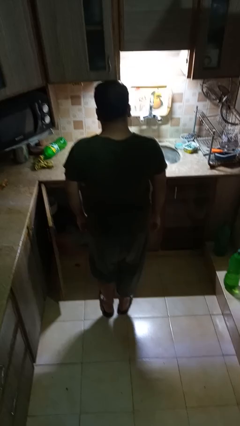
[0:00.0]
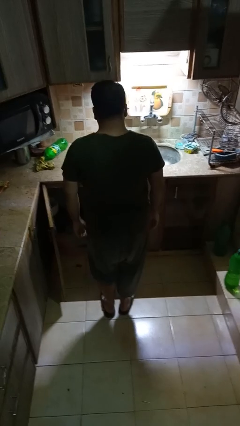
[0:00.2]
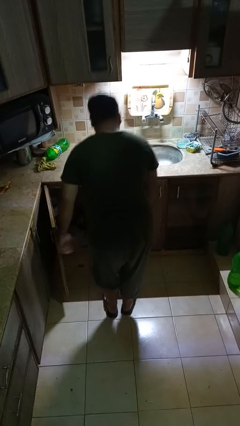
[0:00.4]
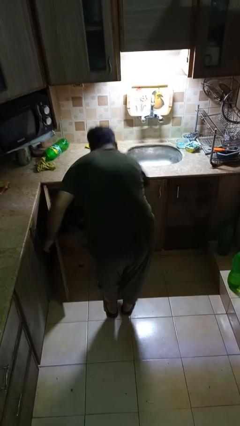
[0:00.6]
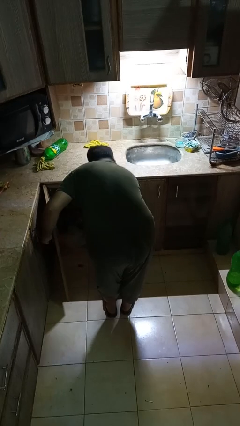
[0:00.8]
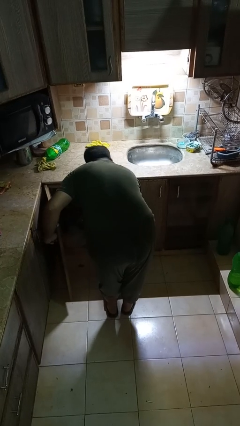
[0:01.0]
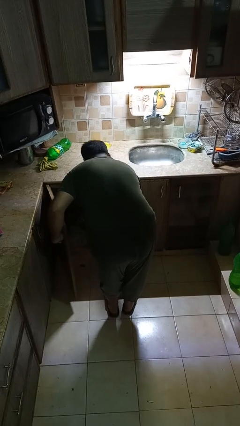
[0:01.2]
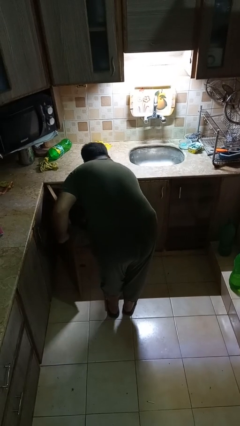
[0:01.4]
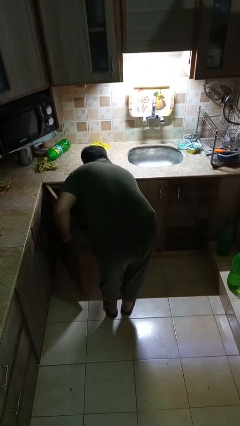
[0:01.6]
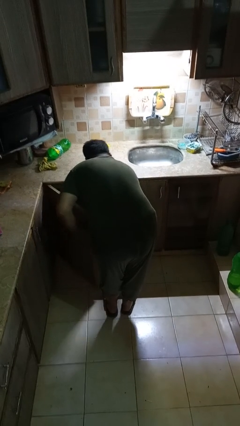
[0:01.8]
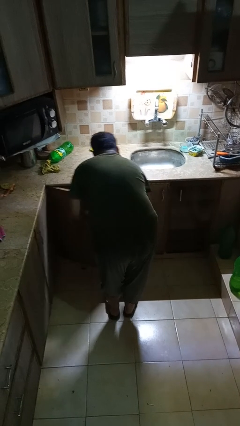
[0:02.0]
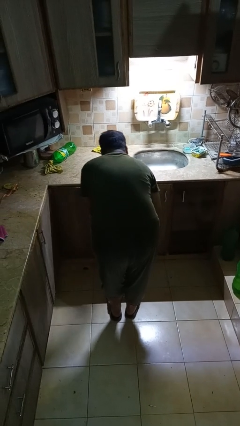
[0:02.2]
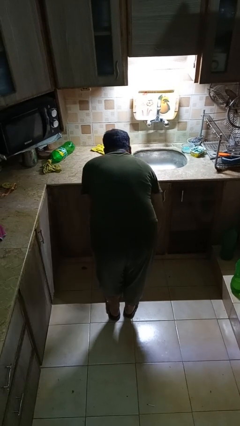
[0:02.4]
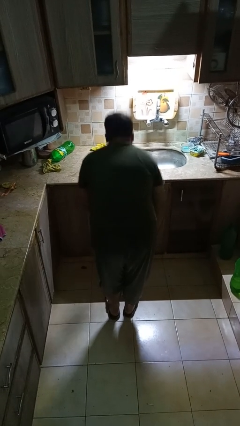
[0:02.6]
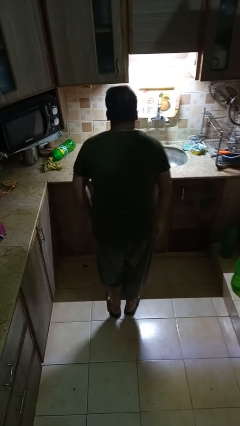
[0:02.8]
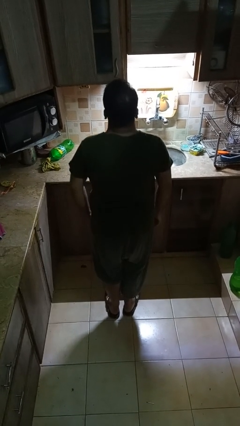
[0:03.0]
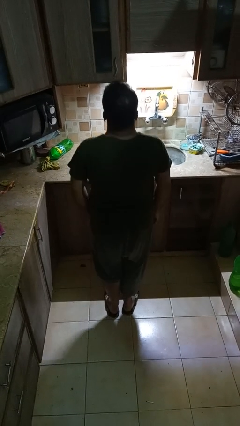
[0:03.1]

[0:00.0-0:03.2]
person puts object in cabinet

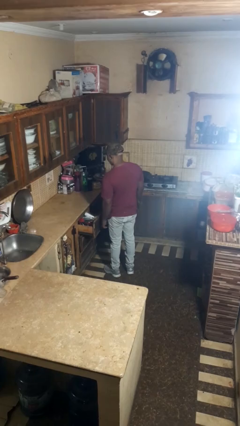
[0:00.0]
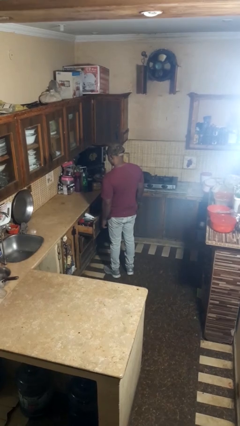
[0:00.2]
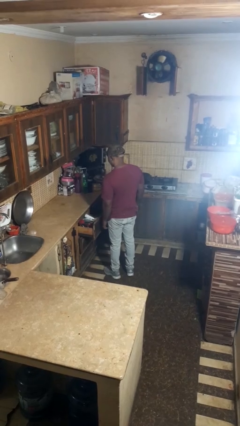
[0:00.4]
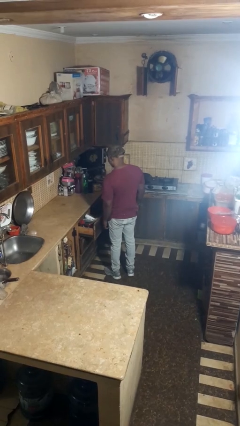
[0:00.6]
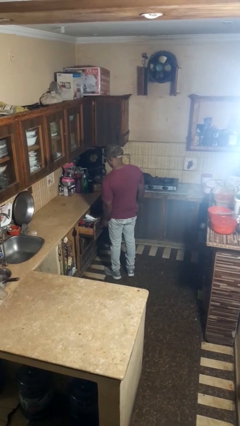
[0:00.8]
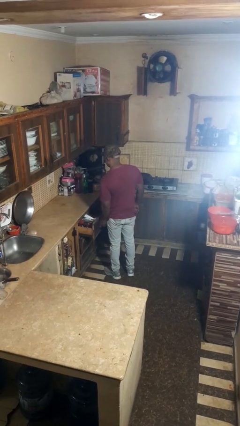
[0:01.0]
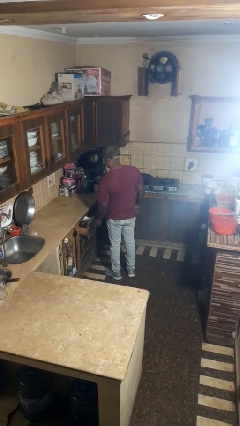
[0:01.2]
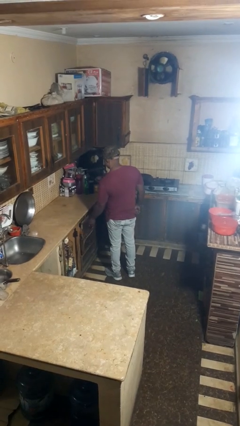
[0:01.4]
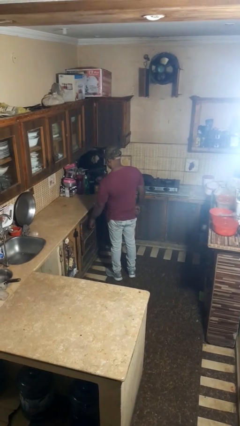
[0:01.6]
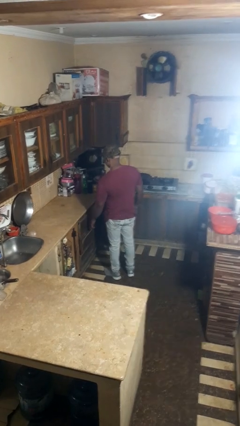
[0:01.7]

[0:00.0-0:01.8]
person closes kitchen drawer

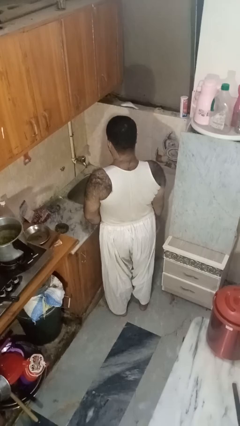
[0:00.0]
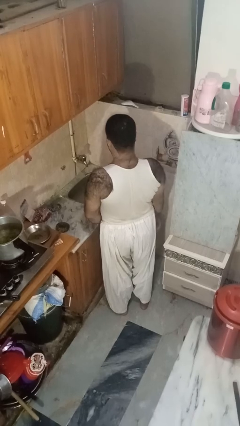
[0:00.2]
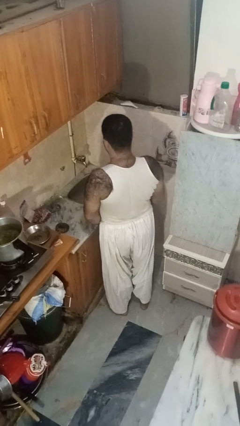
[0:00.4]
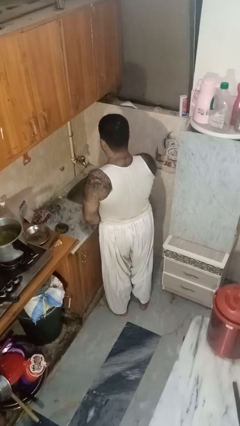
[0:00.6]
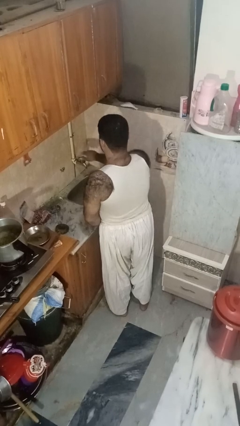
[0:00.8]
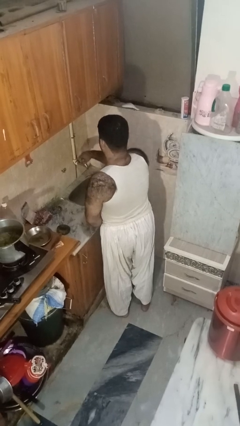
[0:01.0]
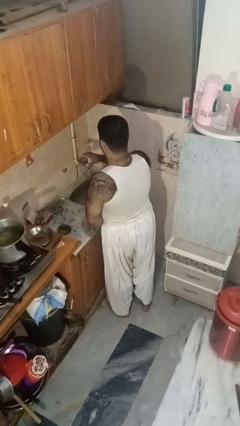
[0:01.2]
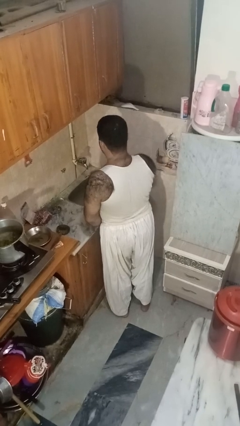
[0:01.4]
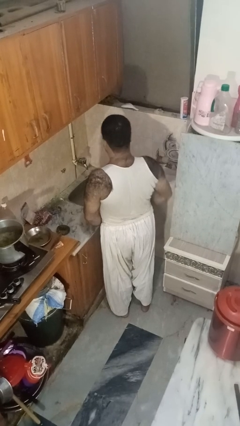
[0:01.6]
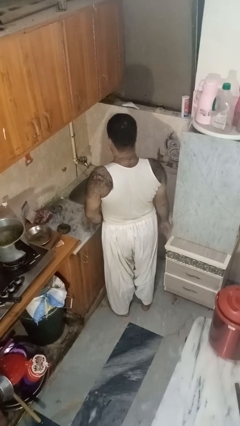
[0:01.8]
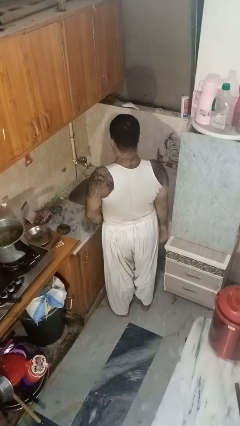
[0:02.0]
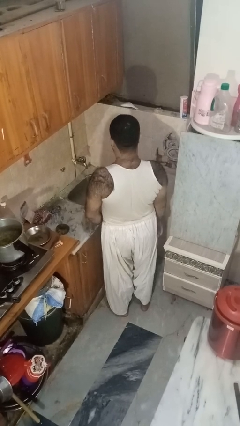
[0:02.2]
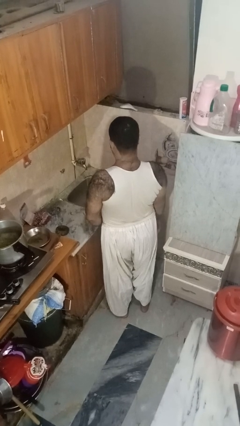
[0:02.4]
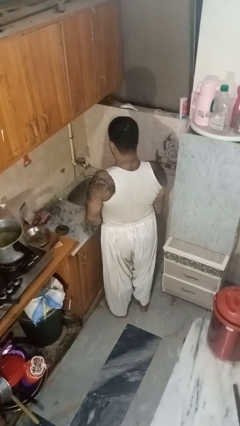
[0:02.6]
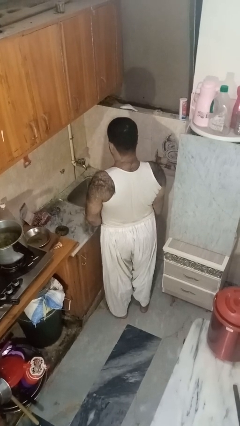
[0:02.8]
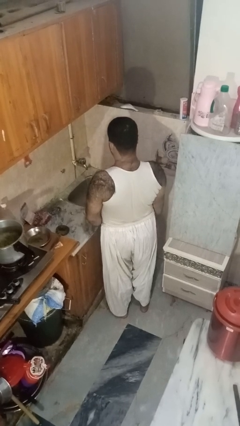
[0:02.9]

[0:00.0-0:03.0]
person turns on faucet

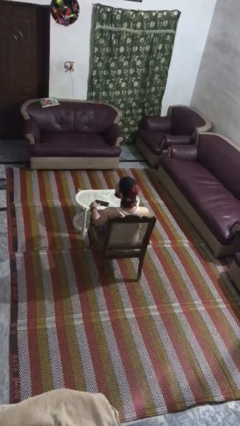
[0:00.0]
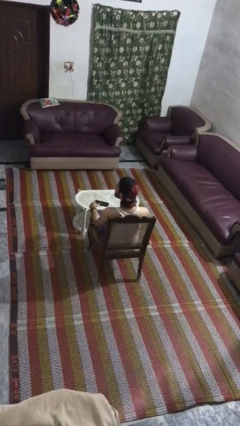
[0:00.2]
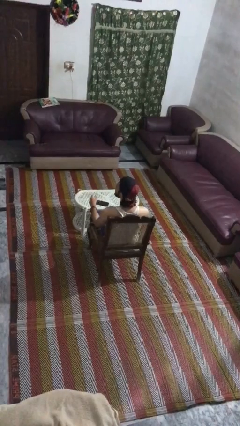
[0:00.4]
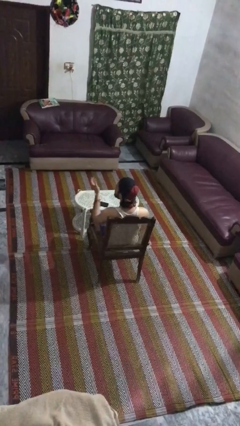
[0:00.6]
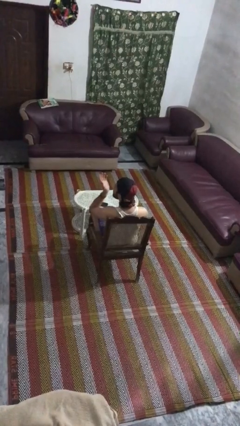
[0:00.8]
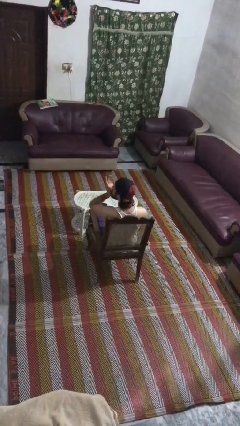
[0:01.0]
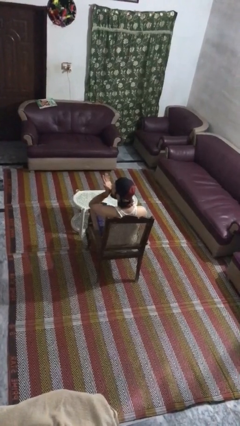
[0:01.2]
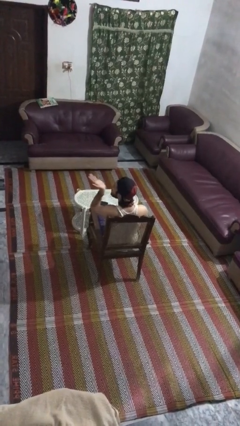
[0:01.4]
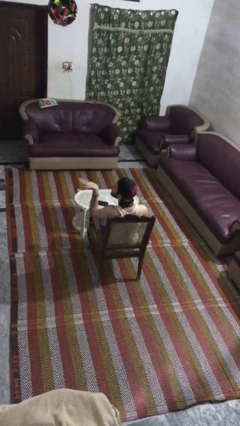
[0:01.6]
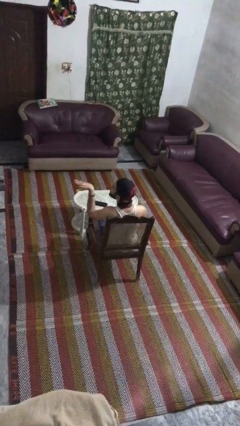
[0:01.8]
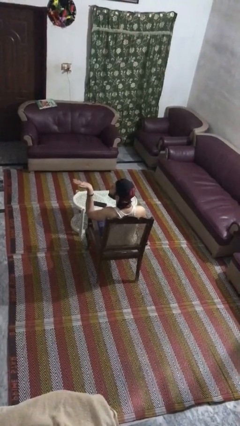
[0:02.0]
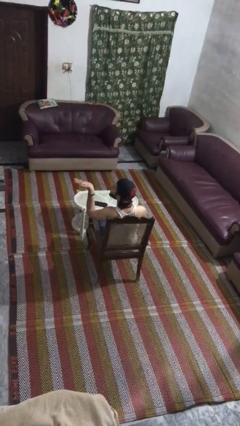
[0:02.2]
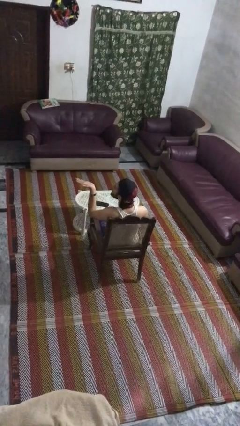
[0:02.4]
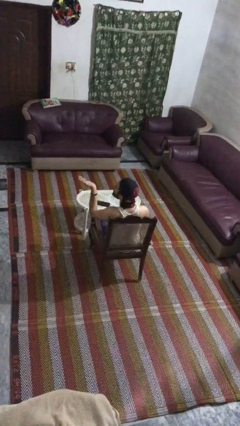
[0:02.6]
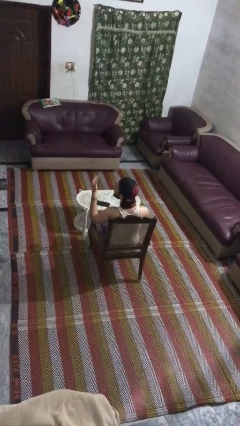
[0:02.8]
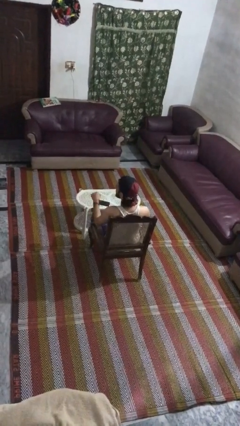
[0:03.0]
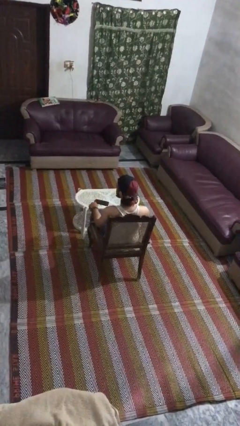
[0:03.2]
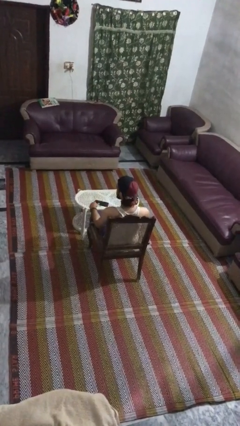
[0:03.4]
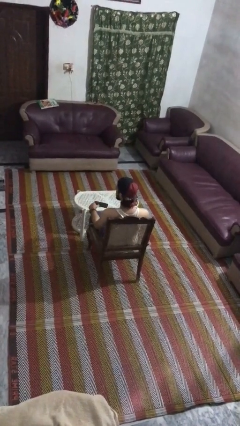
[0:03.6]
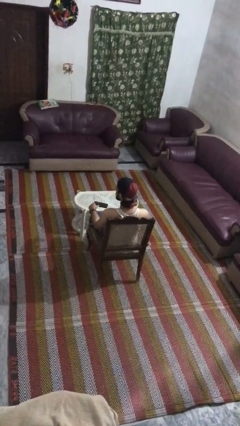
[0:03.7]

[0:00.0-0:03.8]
person gestures blow kiss

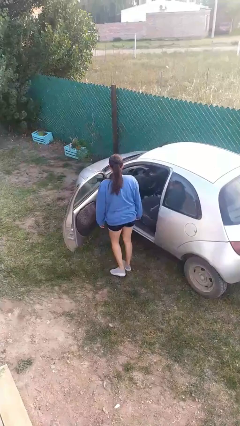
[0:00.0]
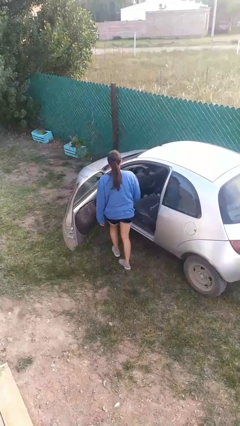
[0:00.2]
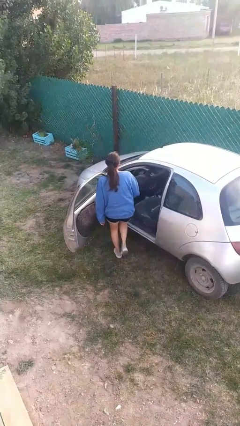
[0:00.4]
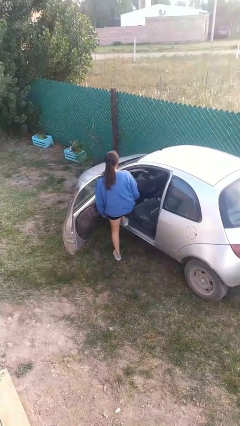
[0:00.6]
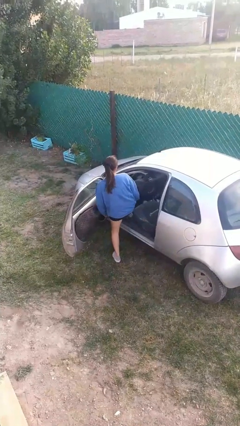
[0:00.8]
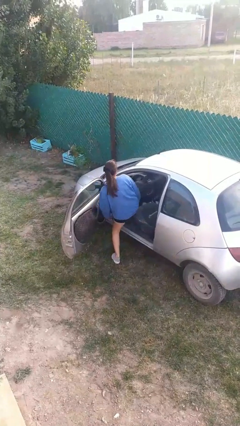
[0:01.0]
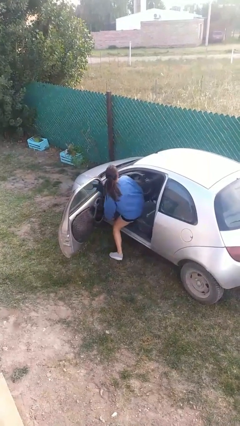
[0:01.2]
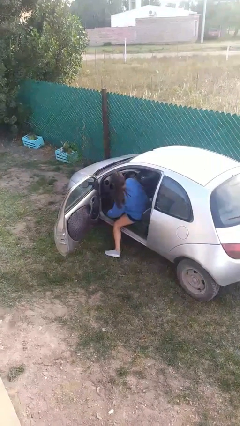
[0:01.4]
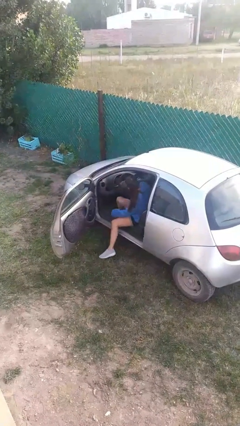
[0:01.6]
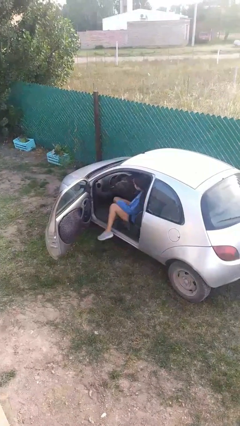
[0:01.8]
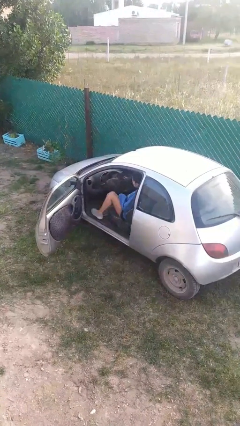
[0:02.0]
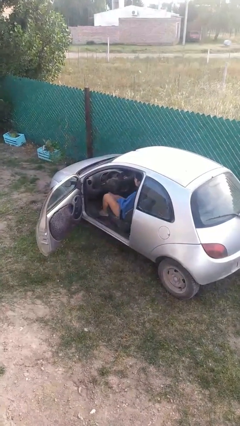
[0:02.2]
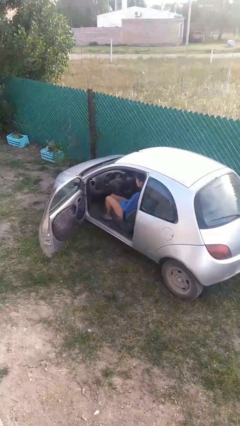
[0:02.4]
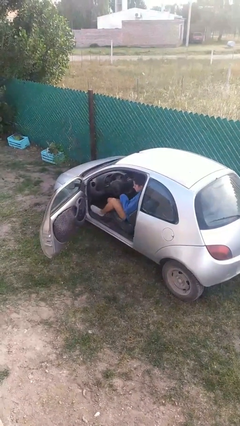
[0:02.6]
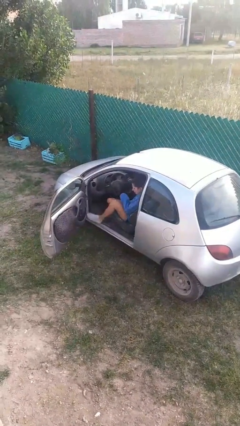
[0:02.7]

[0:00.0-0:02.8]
person enters car

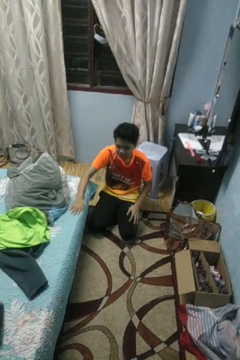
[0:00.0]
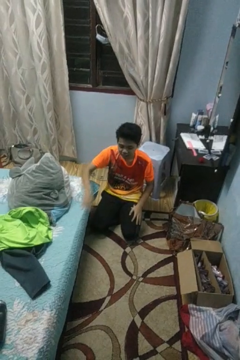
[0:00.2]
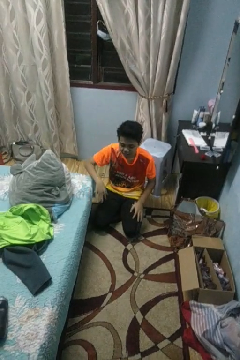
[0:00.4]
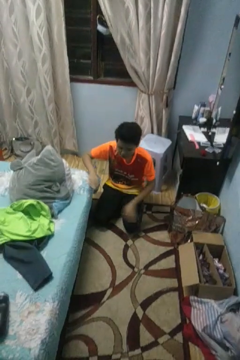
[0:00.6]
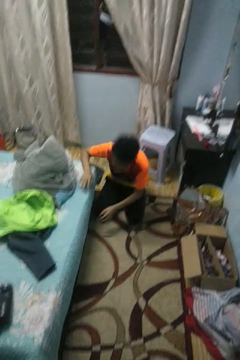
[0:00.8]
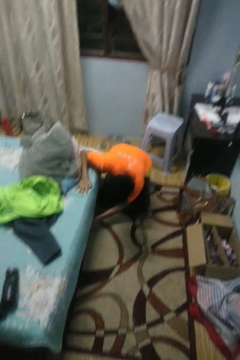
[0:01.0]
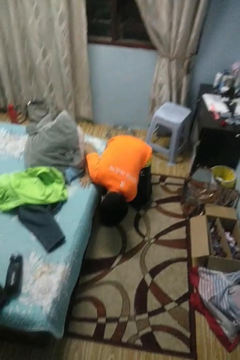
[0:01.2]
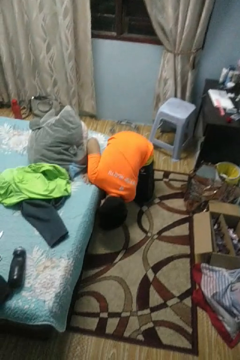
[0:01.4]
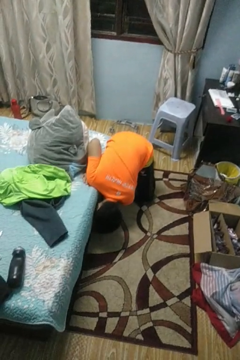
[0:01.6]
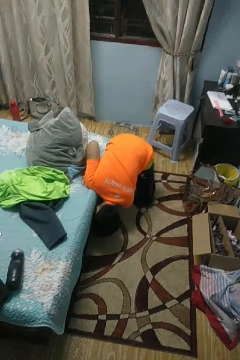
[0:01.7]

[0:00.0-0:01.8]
person searches under bed

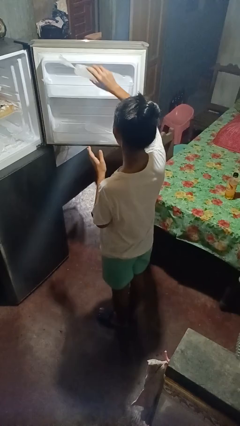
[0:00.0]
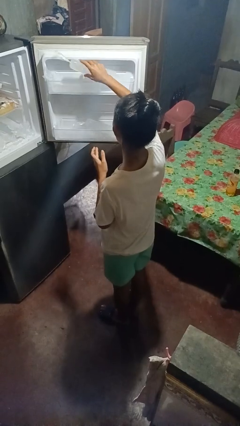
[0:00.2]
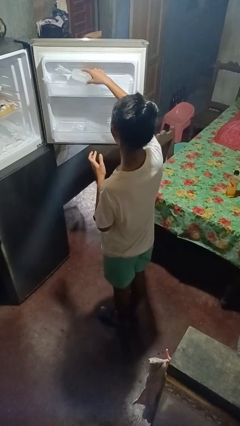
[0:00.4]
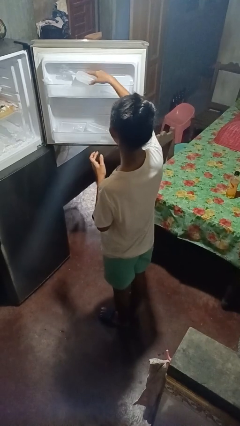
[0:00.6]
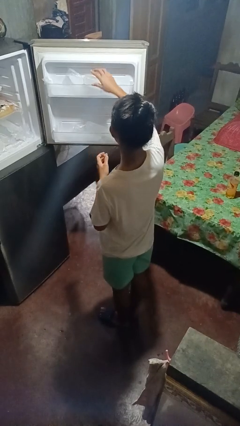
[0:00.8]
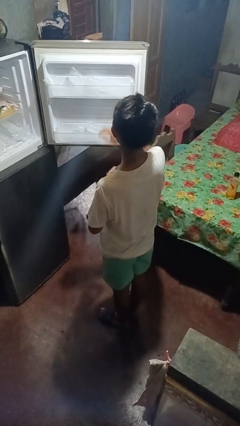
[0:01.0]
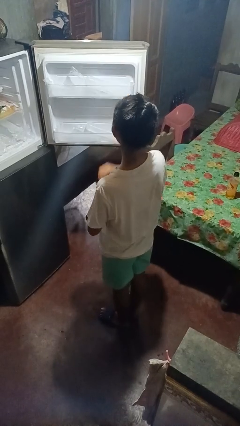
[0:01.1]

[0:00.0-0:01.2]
person puts object into refrigerator
